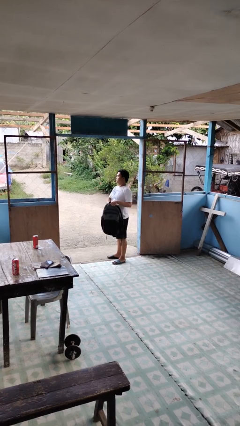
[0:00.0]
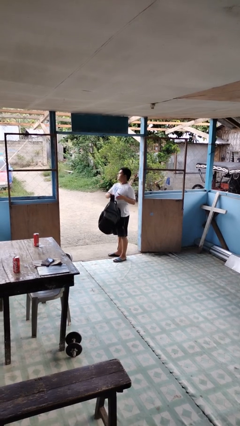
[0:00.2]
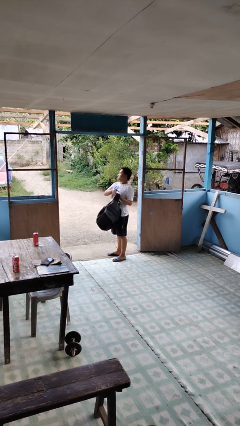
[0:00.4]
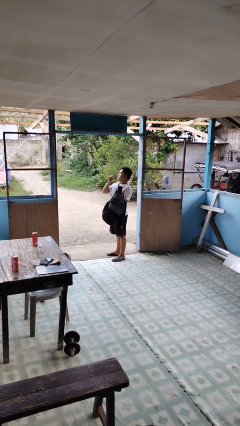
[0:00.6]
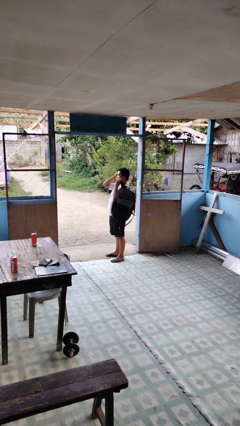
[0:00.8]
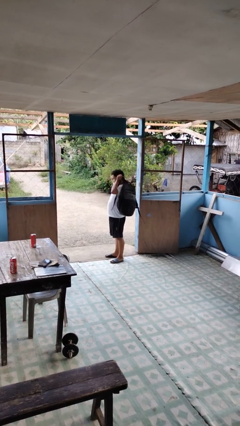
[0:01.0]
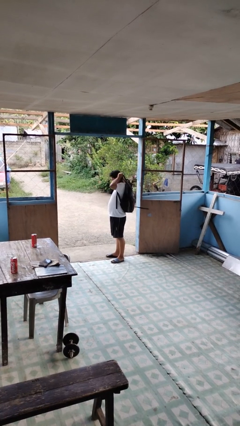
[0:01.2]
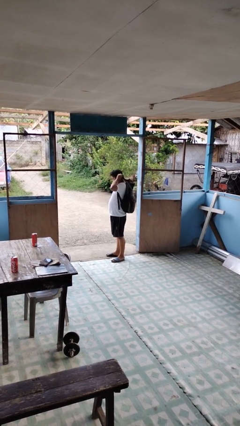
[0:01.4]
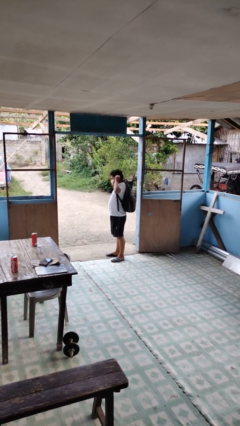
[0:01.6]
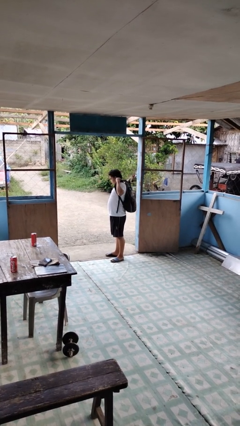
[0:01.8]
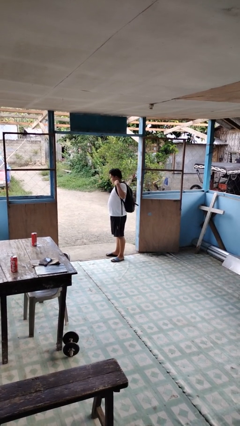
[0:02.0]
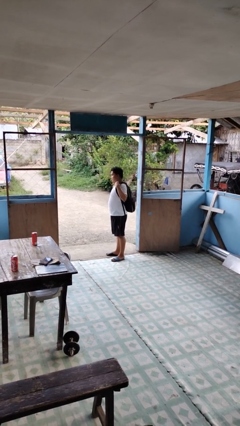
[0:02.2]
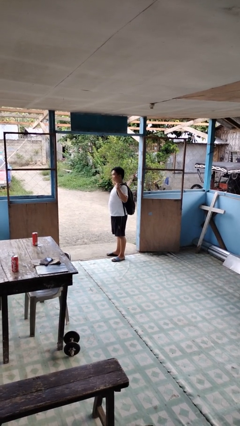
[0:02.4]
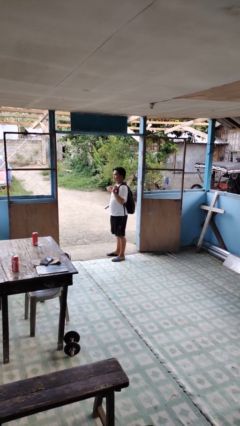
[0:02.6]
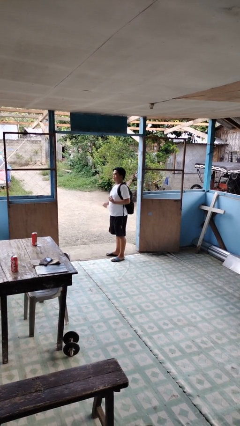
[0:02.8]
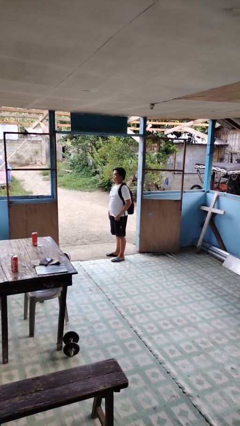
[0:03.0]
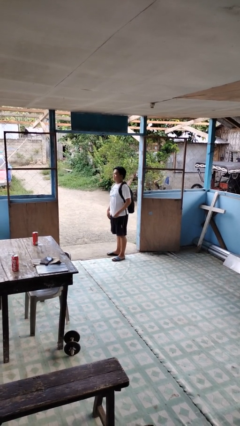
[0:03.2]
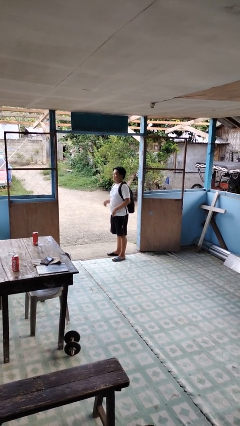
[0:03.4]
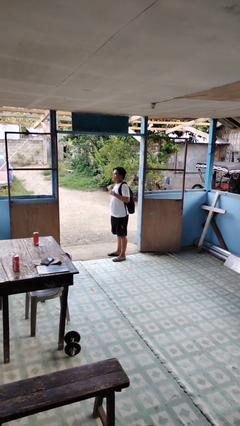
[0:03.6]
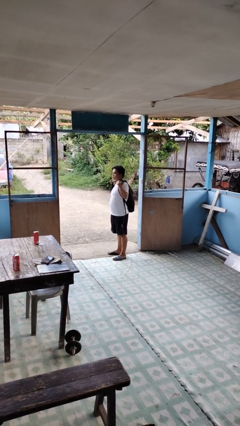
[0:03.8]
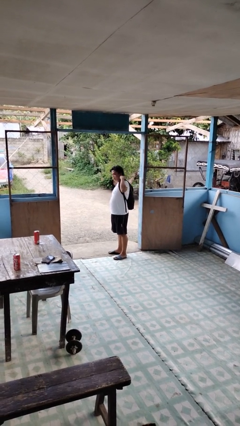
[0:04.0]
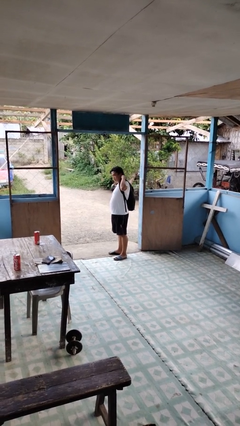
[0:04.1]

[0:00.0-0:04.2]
person puts on backpack

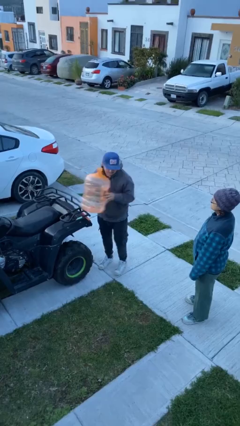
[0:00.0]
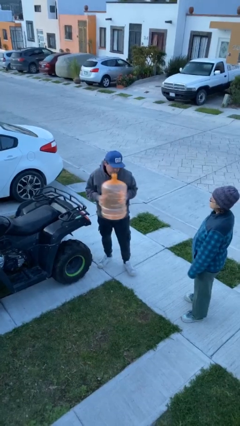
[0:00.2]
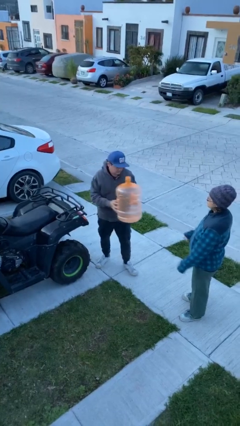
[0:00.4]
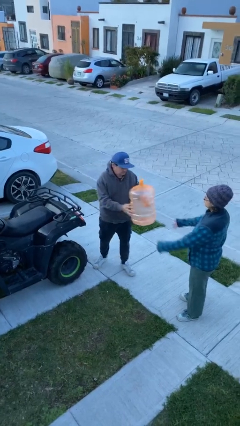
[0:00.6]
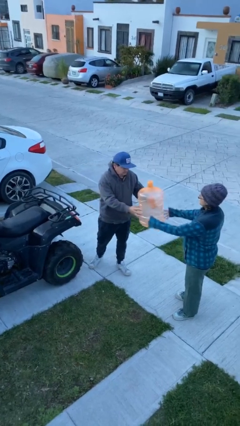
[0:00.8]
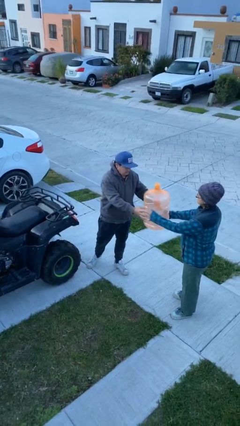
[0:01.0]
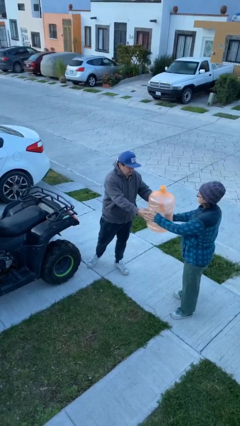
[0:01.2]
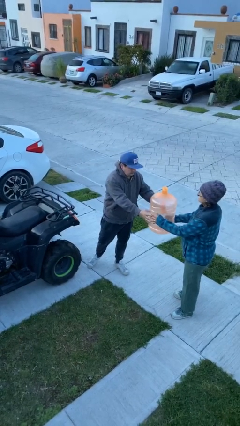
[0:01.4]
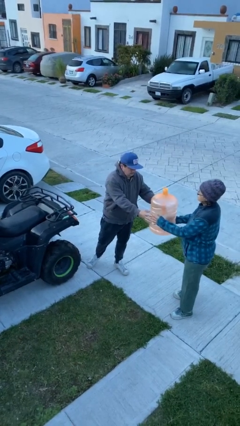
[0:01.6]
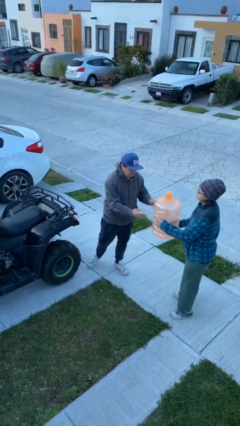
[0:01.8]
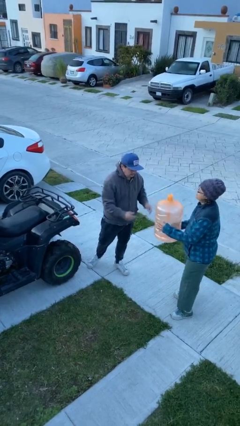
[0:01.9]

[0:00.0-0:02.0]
person transfers object to person

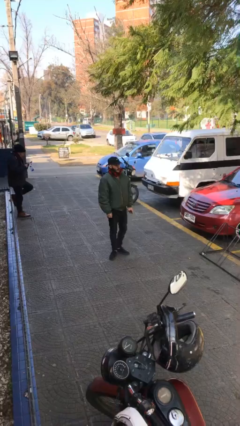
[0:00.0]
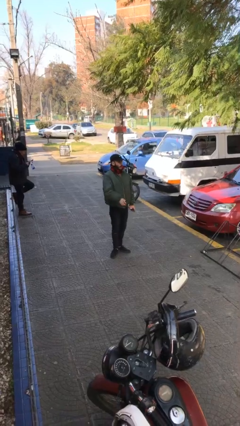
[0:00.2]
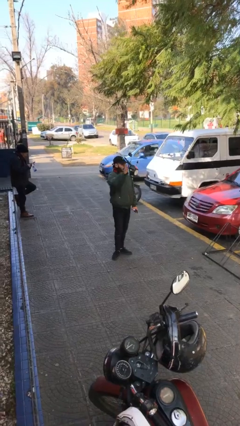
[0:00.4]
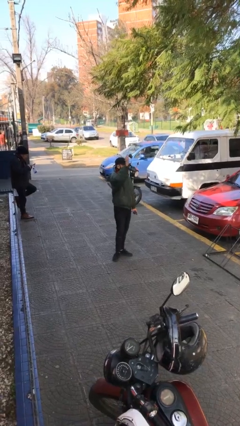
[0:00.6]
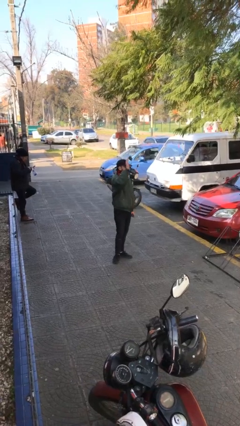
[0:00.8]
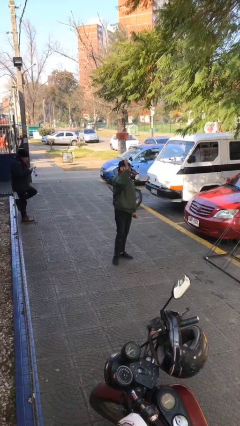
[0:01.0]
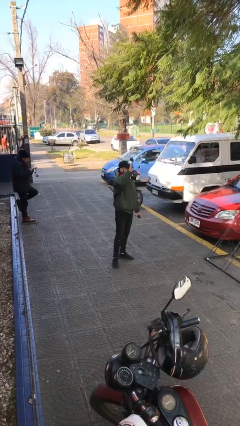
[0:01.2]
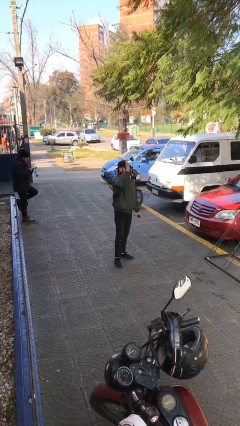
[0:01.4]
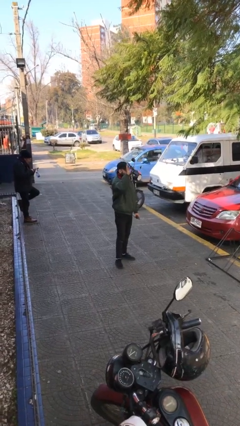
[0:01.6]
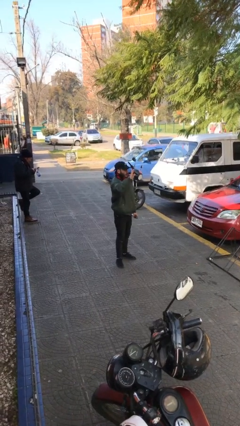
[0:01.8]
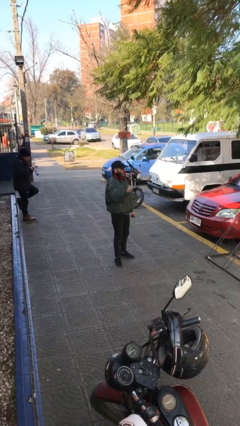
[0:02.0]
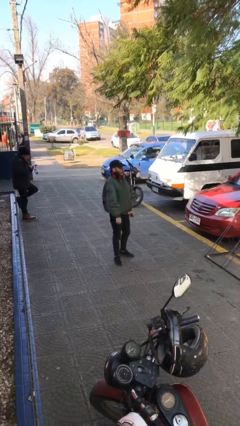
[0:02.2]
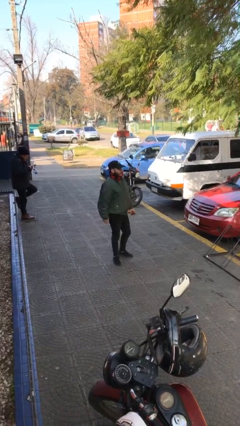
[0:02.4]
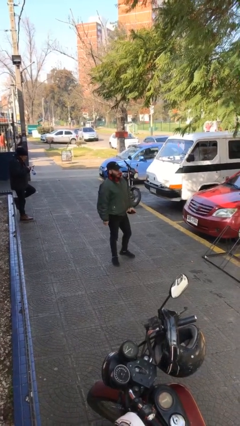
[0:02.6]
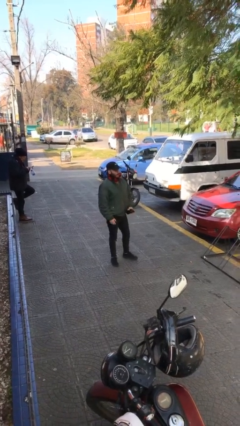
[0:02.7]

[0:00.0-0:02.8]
person waves at person

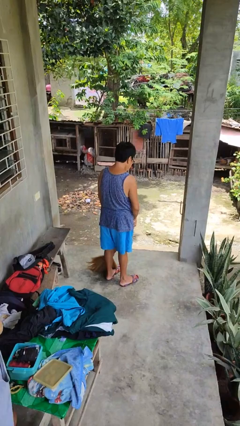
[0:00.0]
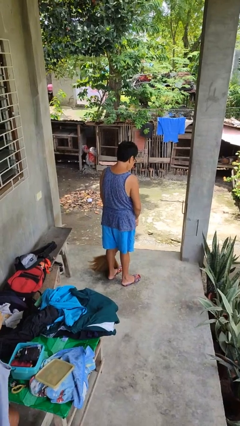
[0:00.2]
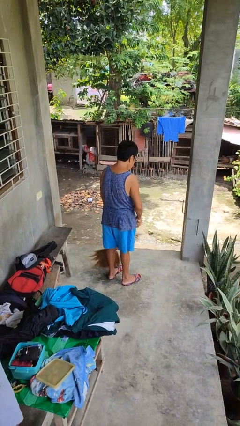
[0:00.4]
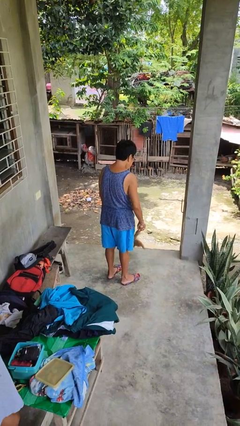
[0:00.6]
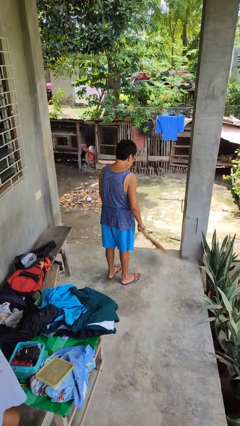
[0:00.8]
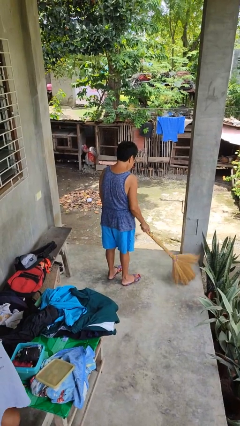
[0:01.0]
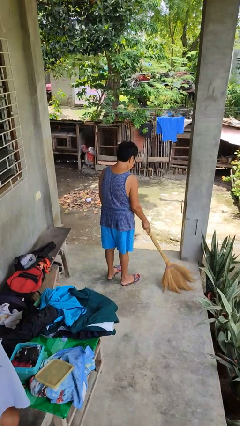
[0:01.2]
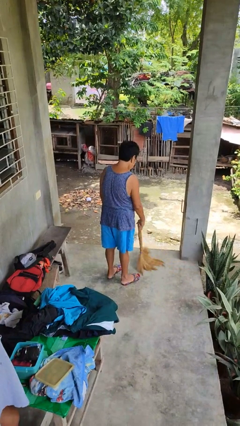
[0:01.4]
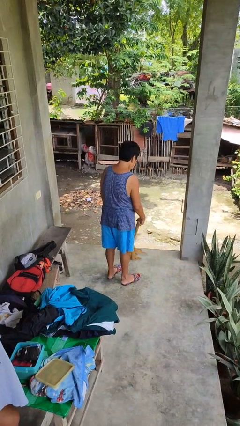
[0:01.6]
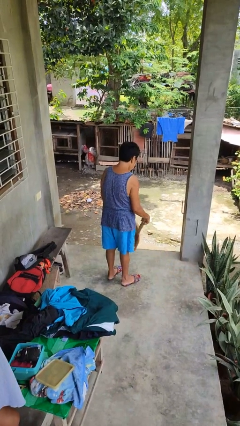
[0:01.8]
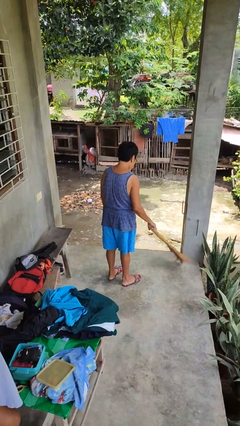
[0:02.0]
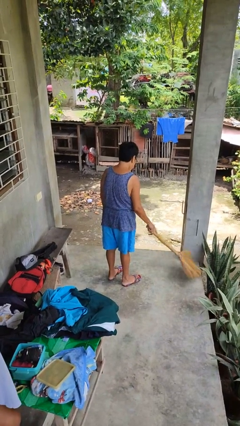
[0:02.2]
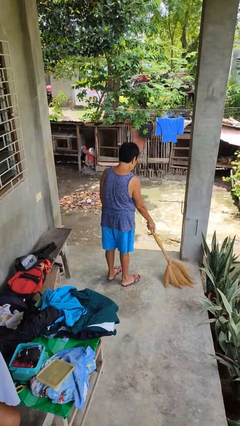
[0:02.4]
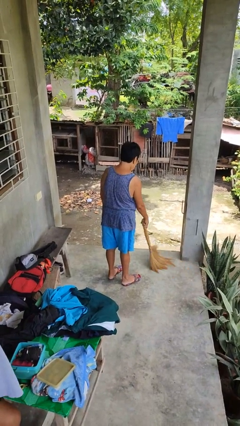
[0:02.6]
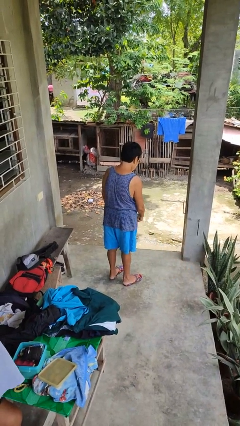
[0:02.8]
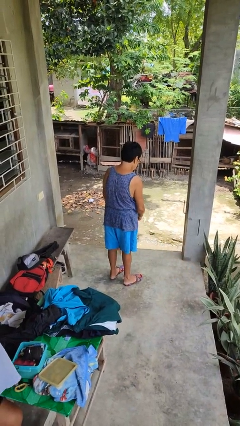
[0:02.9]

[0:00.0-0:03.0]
person sweeps floor

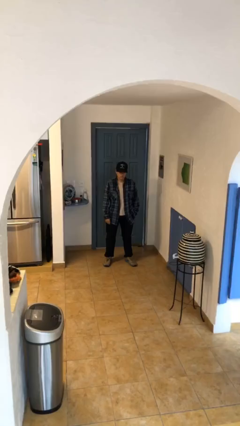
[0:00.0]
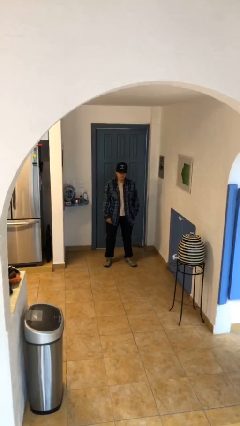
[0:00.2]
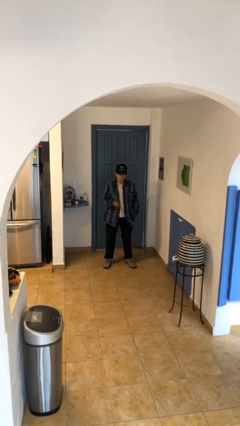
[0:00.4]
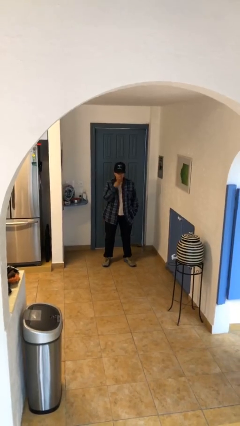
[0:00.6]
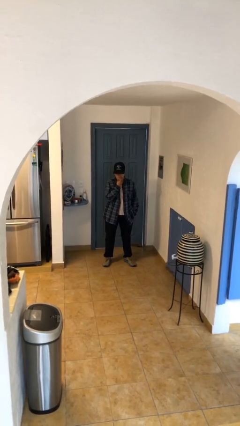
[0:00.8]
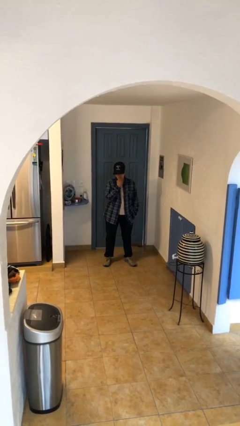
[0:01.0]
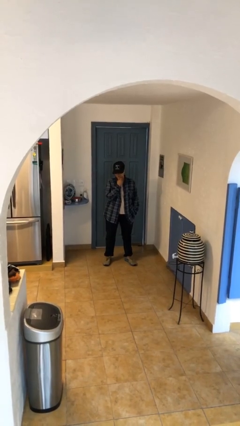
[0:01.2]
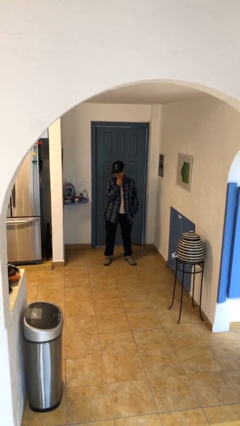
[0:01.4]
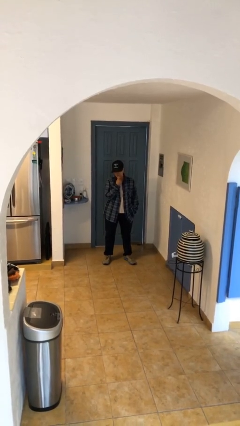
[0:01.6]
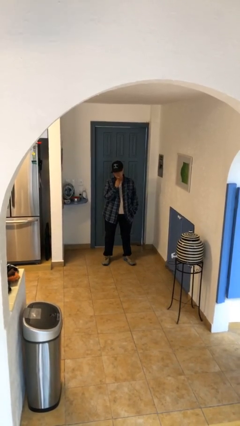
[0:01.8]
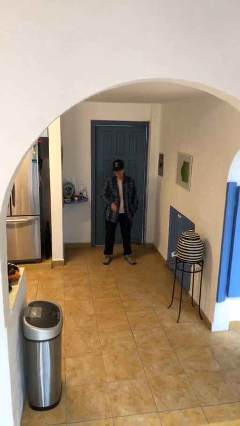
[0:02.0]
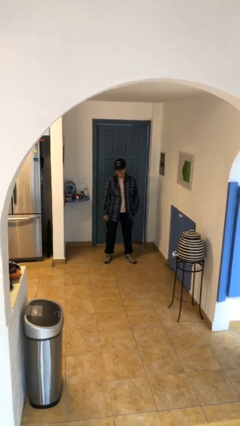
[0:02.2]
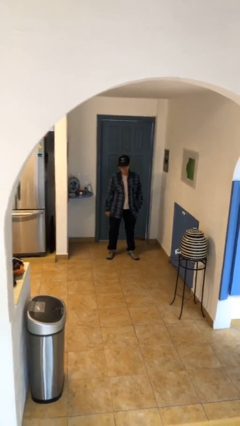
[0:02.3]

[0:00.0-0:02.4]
person strokes chin

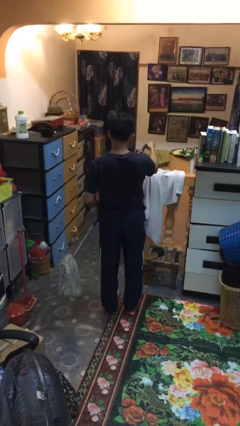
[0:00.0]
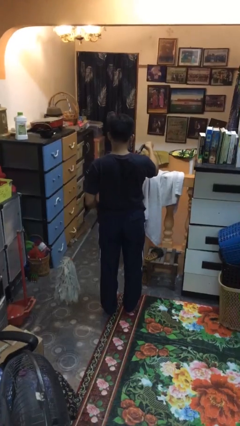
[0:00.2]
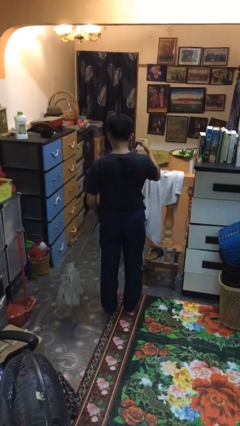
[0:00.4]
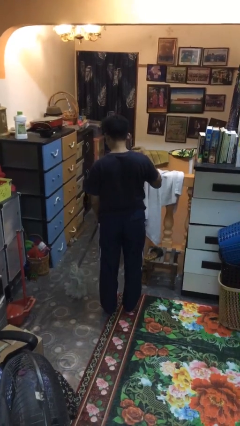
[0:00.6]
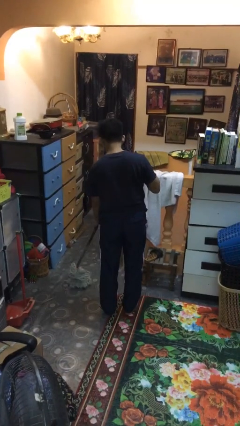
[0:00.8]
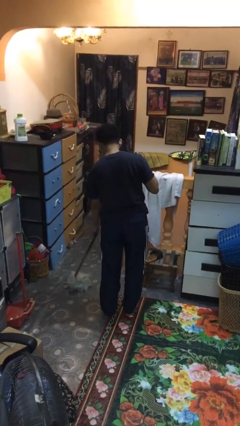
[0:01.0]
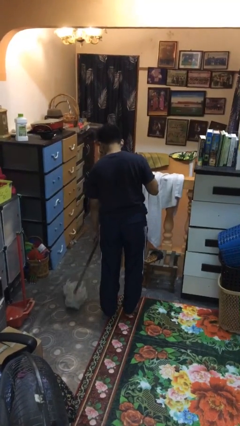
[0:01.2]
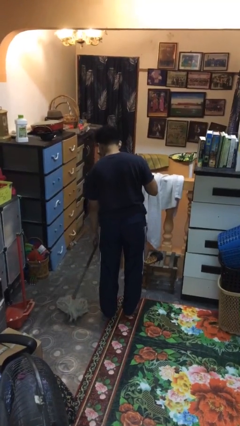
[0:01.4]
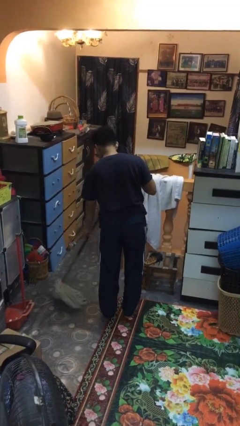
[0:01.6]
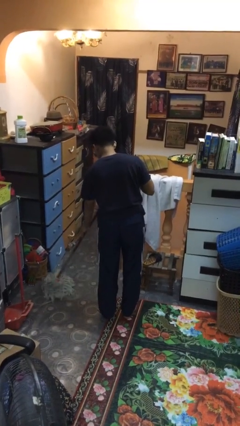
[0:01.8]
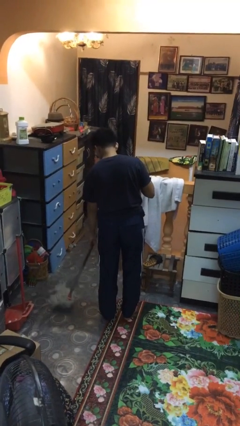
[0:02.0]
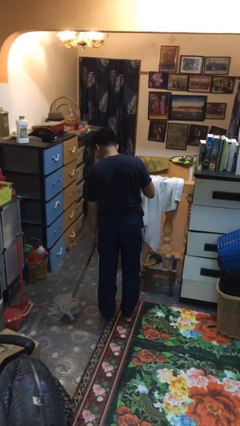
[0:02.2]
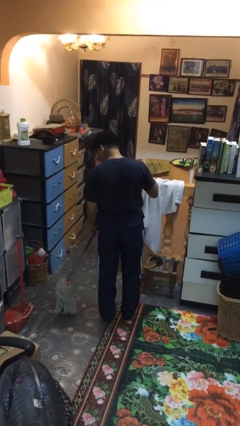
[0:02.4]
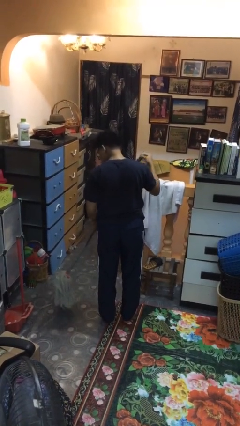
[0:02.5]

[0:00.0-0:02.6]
person mops

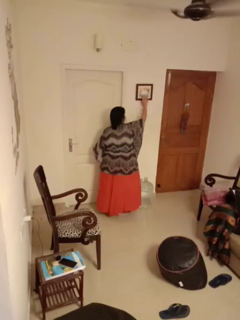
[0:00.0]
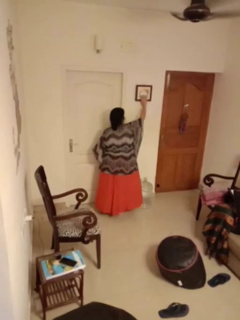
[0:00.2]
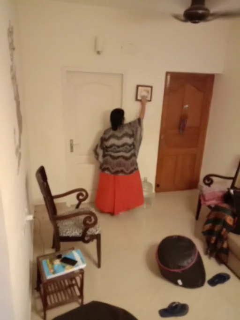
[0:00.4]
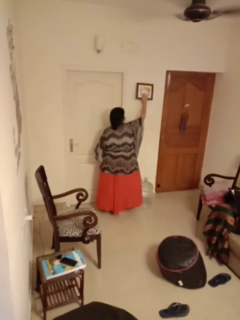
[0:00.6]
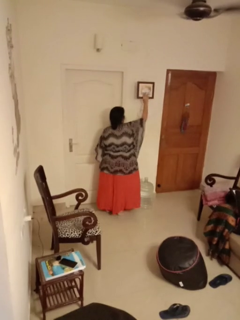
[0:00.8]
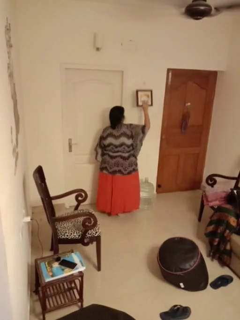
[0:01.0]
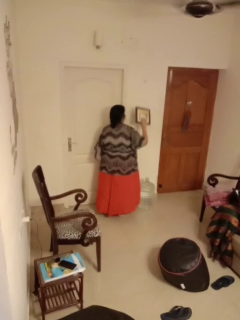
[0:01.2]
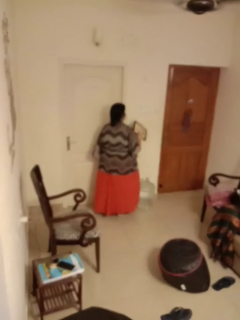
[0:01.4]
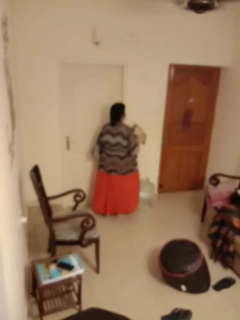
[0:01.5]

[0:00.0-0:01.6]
person takes down picture frame
